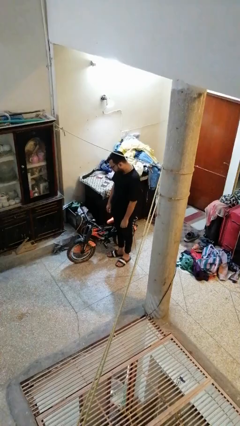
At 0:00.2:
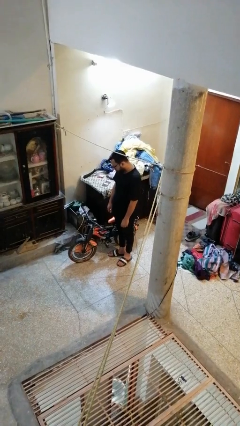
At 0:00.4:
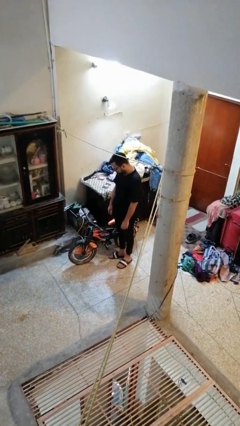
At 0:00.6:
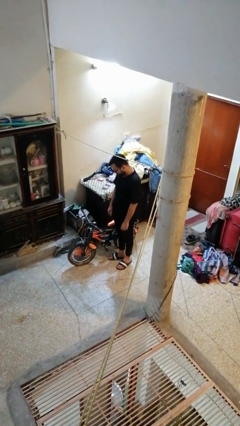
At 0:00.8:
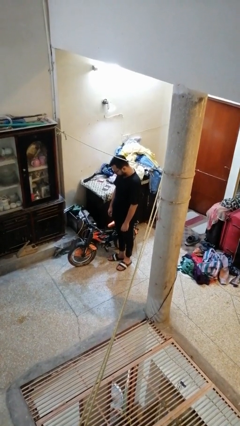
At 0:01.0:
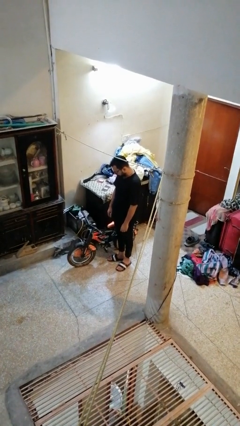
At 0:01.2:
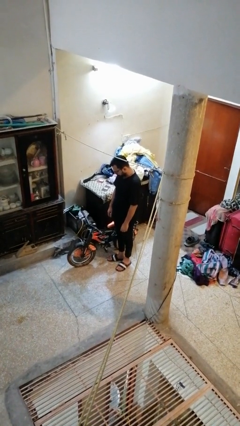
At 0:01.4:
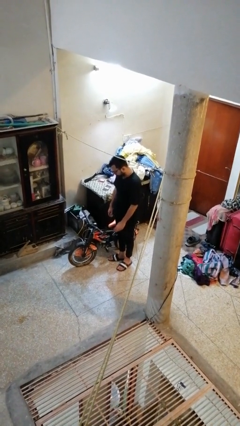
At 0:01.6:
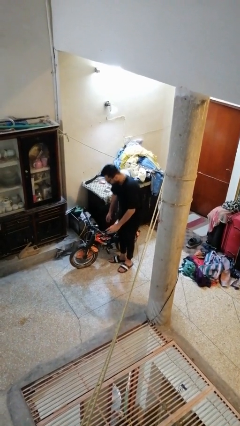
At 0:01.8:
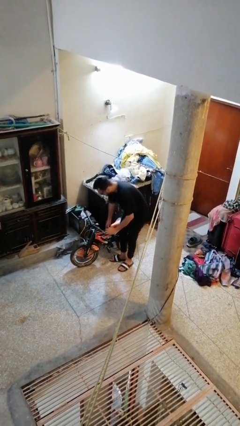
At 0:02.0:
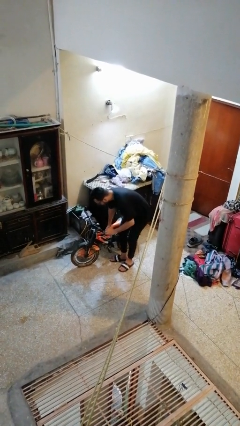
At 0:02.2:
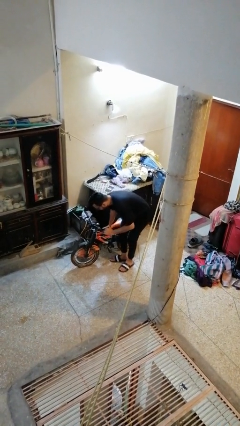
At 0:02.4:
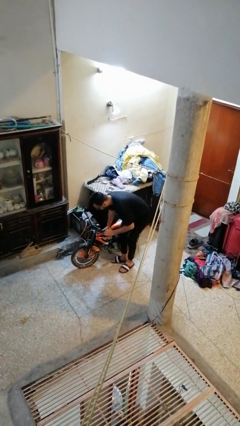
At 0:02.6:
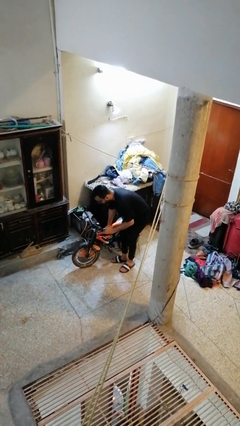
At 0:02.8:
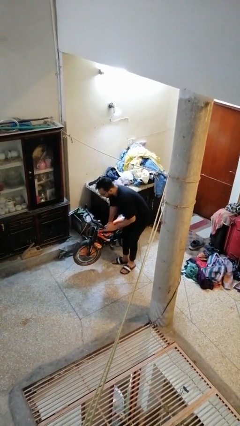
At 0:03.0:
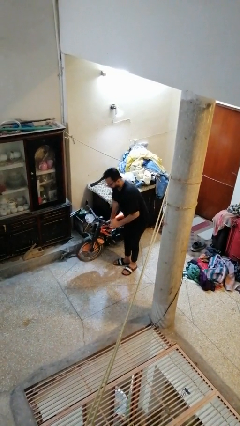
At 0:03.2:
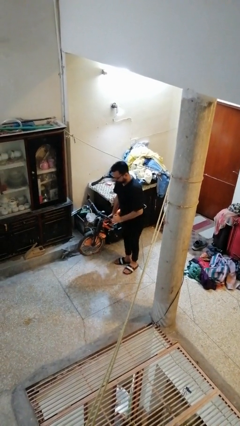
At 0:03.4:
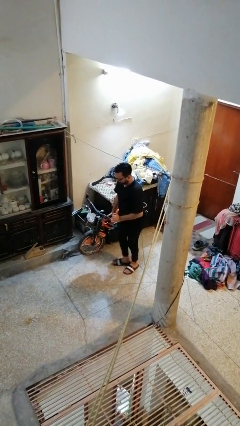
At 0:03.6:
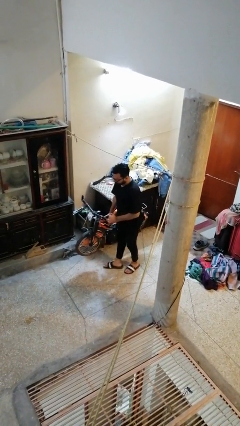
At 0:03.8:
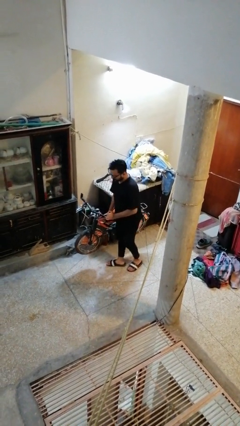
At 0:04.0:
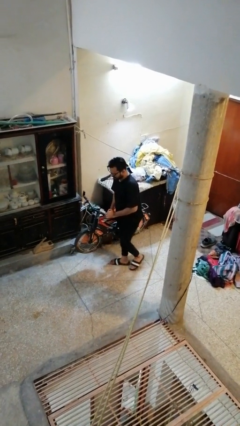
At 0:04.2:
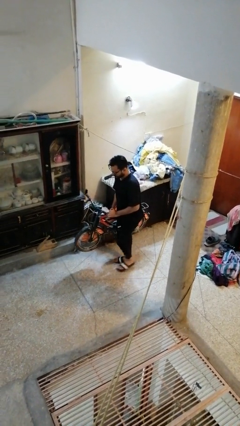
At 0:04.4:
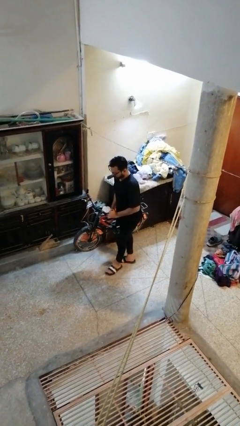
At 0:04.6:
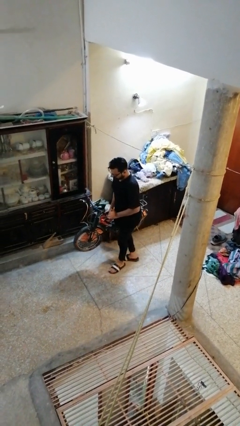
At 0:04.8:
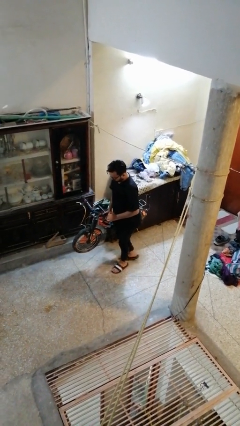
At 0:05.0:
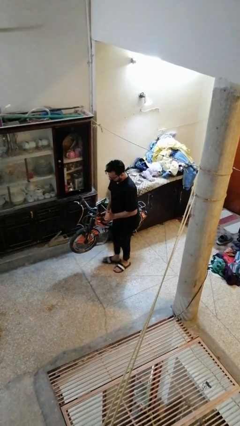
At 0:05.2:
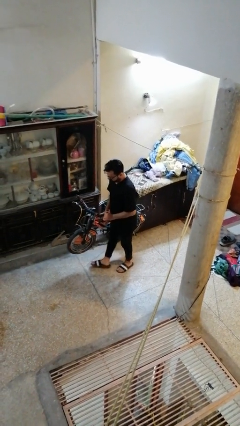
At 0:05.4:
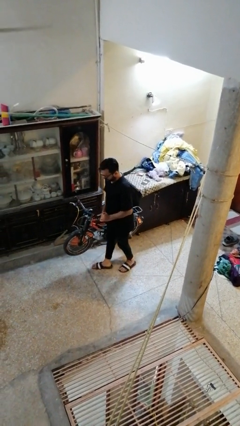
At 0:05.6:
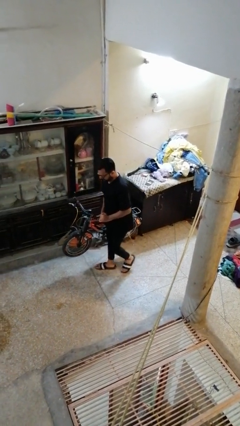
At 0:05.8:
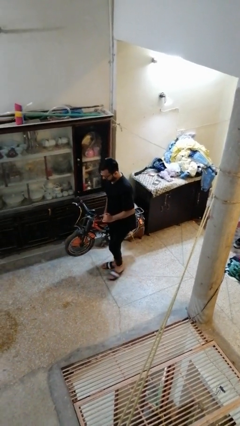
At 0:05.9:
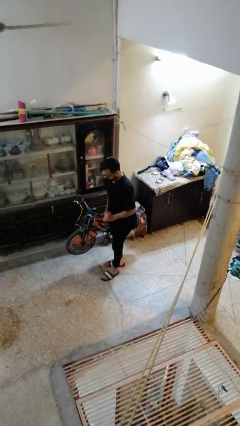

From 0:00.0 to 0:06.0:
person carries bicycle

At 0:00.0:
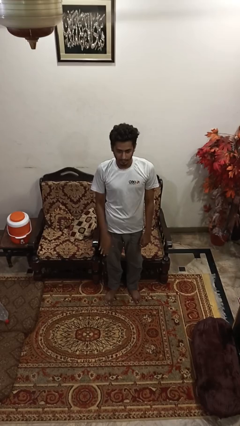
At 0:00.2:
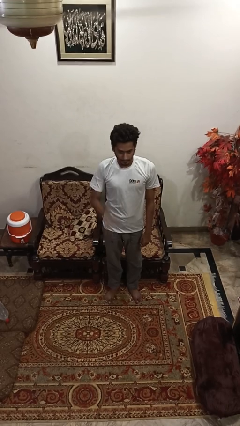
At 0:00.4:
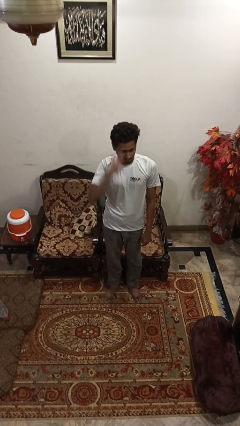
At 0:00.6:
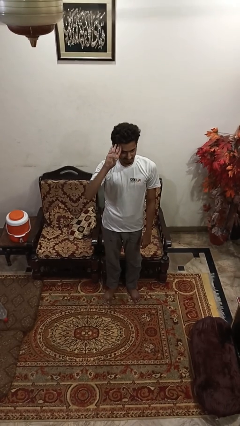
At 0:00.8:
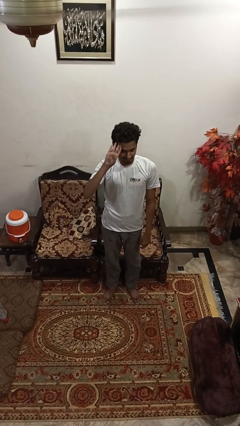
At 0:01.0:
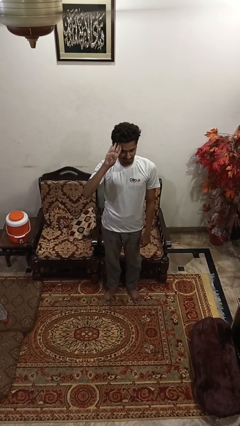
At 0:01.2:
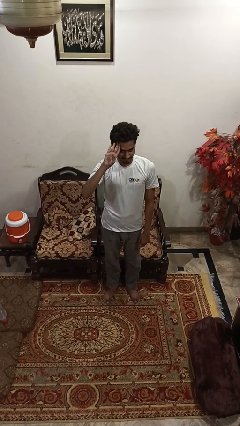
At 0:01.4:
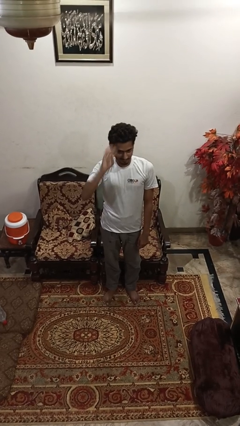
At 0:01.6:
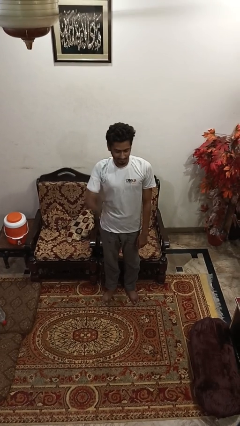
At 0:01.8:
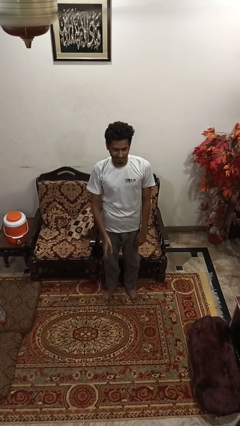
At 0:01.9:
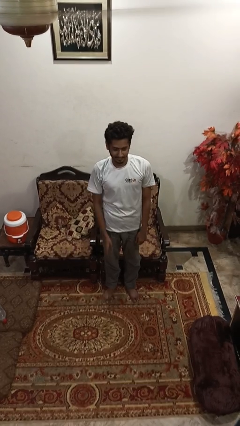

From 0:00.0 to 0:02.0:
person salutes

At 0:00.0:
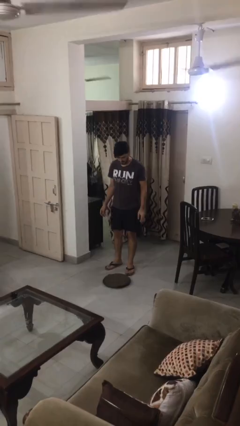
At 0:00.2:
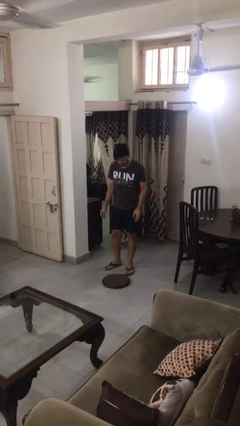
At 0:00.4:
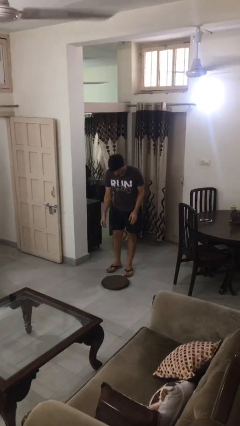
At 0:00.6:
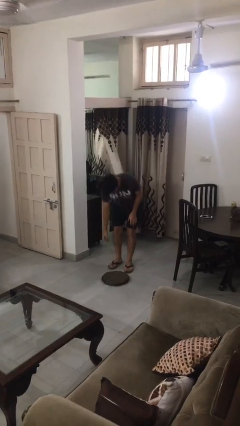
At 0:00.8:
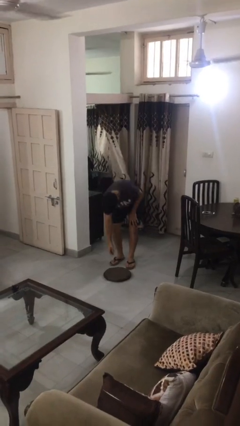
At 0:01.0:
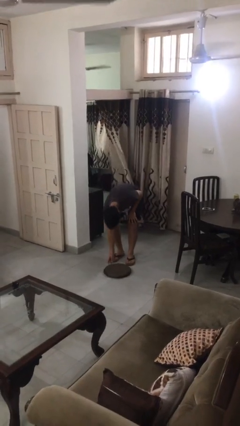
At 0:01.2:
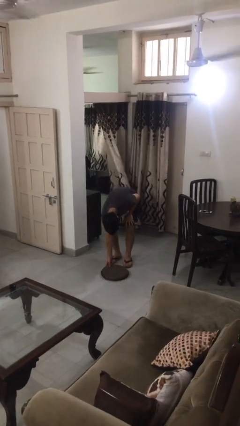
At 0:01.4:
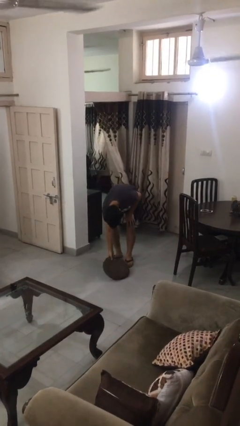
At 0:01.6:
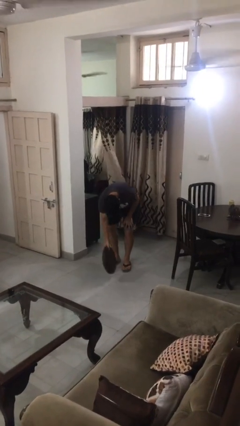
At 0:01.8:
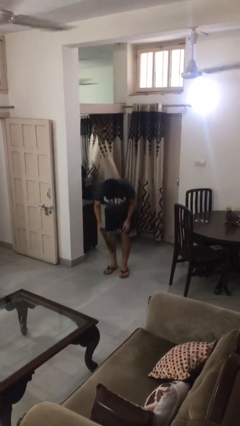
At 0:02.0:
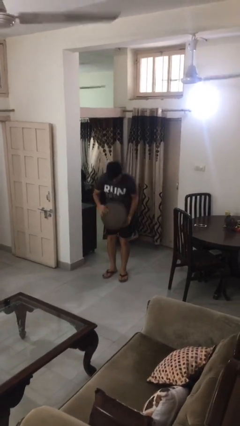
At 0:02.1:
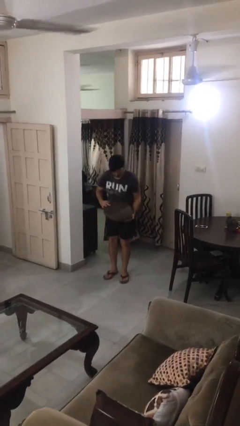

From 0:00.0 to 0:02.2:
person picks up object from floor

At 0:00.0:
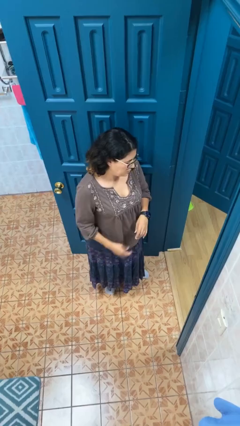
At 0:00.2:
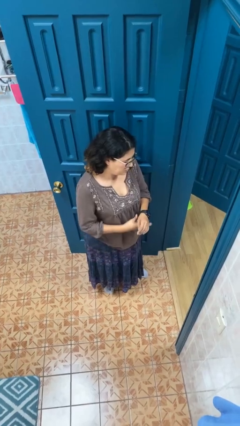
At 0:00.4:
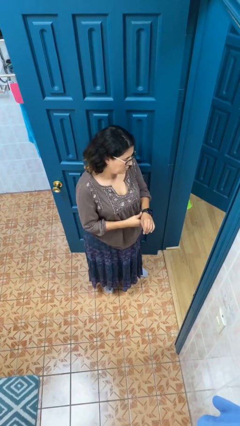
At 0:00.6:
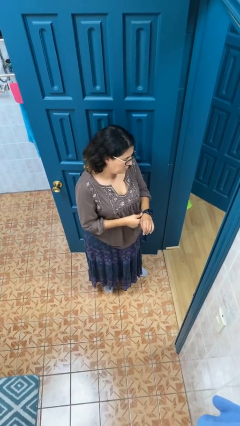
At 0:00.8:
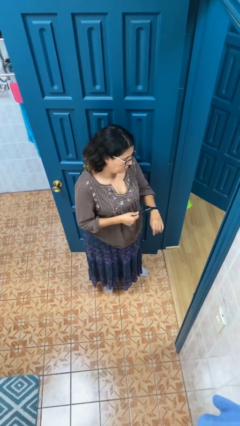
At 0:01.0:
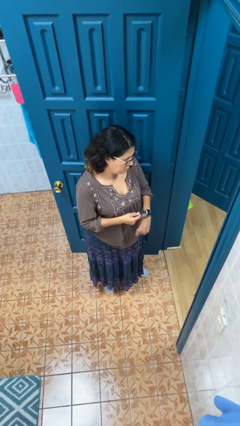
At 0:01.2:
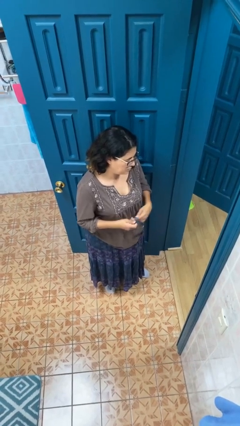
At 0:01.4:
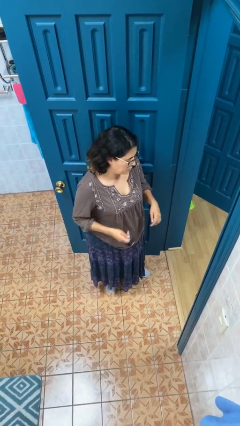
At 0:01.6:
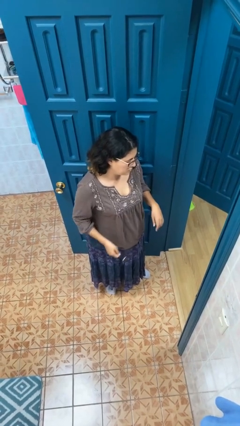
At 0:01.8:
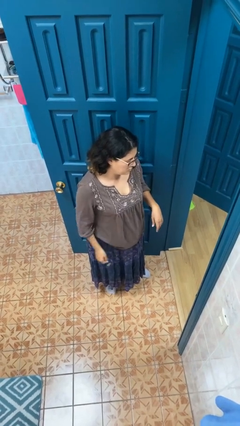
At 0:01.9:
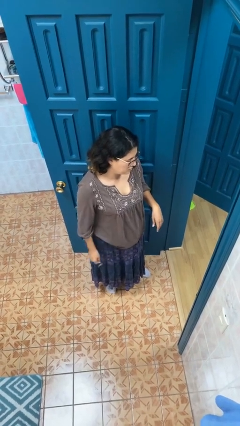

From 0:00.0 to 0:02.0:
person takes off wristwatch

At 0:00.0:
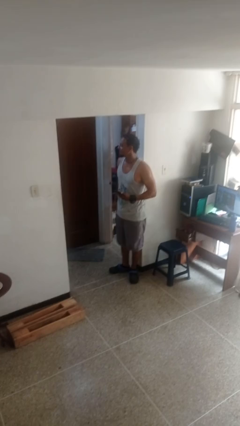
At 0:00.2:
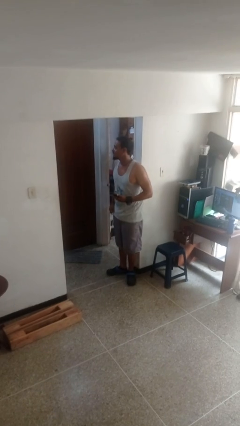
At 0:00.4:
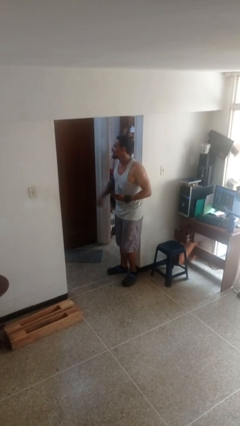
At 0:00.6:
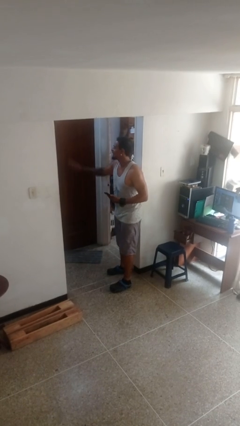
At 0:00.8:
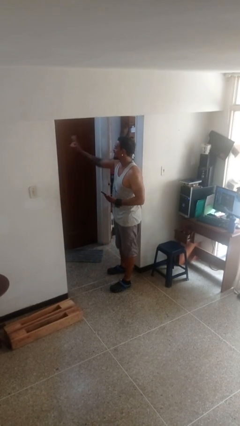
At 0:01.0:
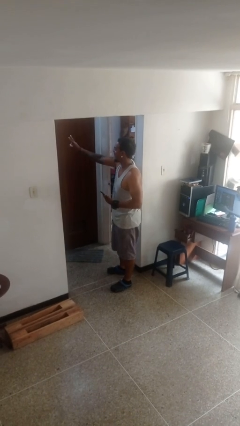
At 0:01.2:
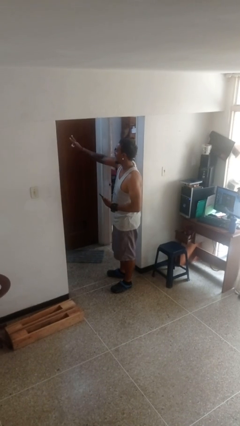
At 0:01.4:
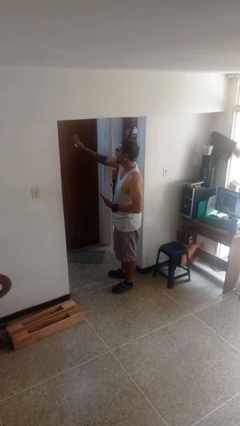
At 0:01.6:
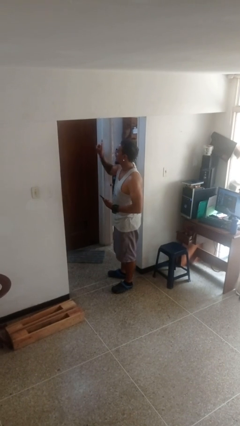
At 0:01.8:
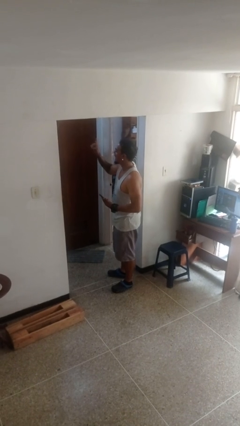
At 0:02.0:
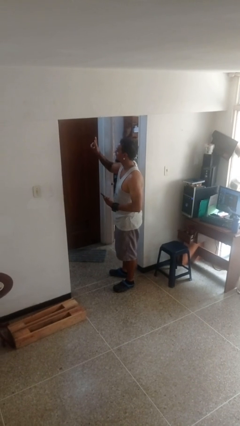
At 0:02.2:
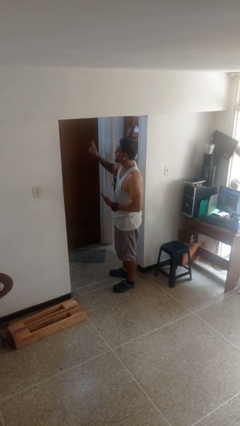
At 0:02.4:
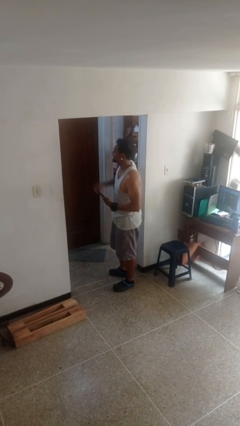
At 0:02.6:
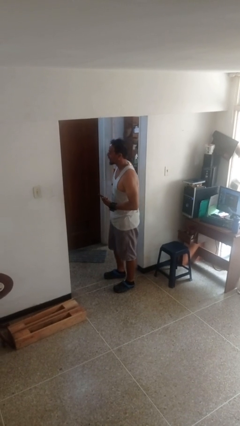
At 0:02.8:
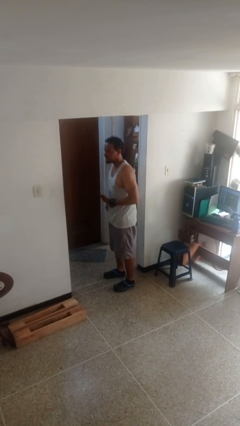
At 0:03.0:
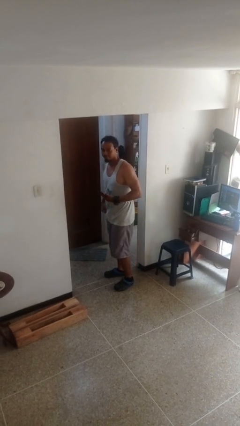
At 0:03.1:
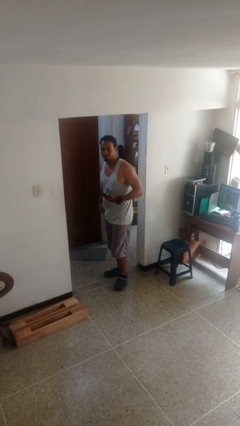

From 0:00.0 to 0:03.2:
person gestures peace

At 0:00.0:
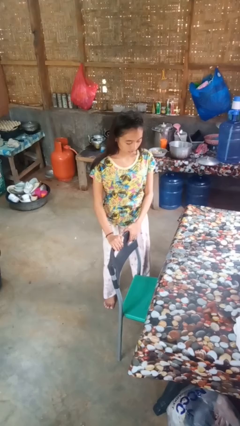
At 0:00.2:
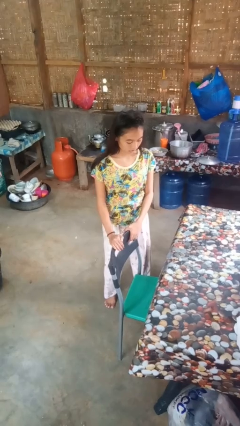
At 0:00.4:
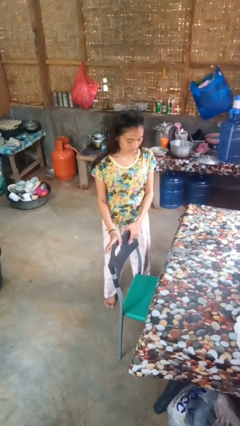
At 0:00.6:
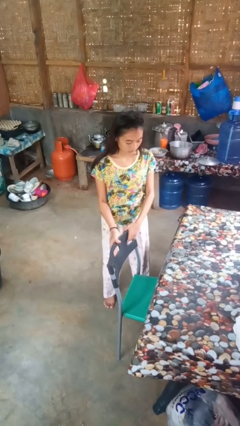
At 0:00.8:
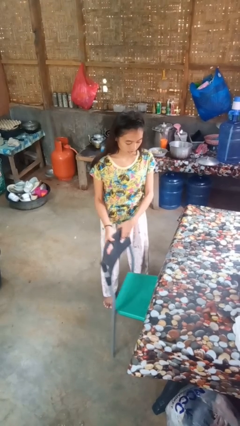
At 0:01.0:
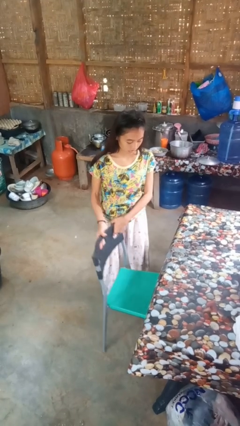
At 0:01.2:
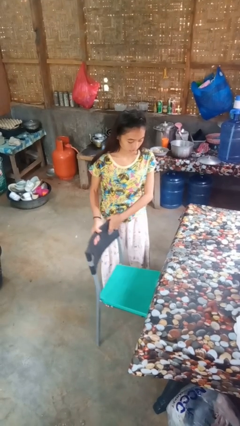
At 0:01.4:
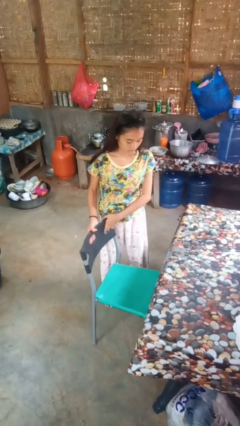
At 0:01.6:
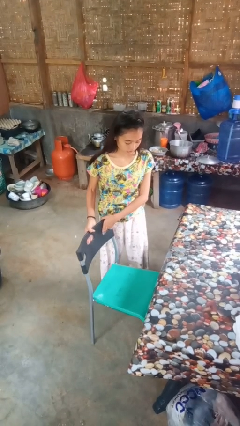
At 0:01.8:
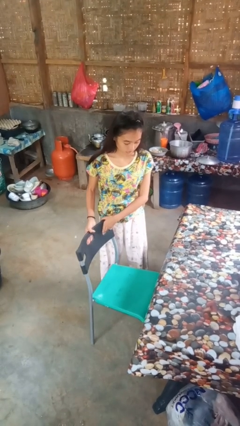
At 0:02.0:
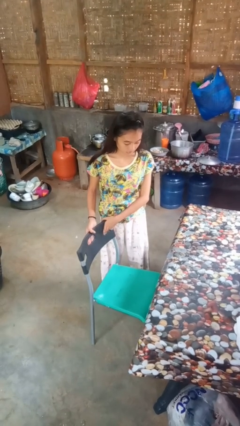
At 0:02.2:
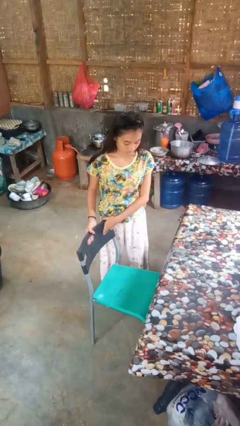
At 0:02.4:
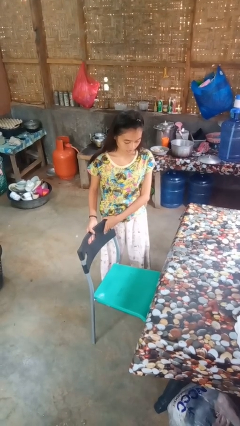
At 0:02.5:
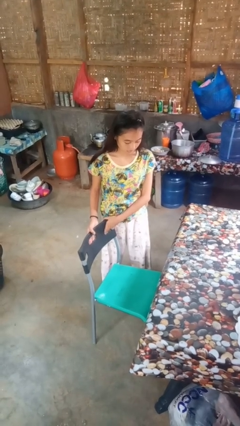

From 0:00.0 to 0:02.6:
person pulls out chair
